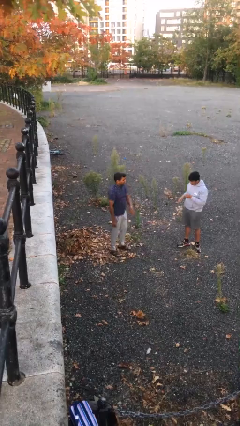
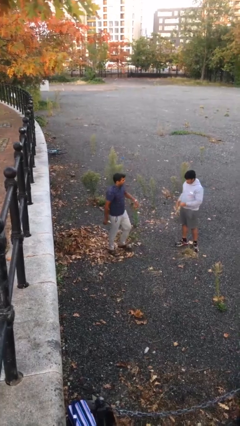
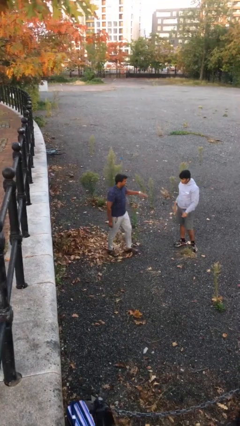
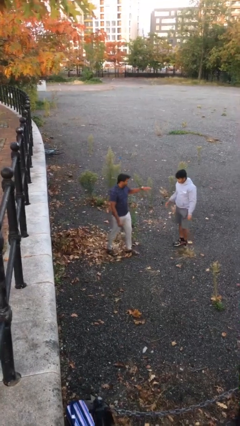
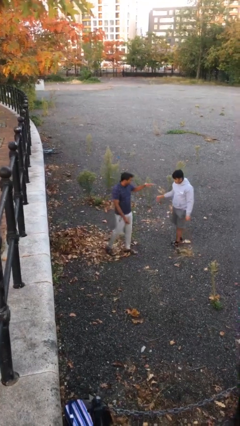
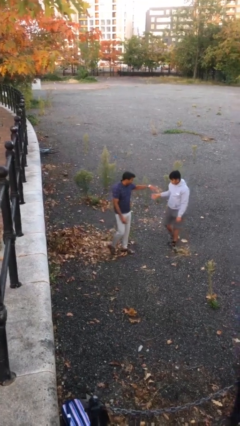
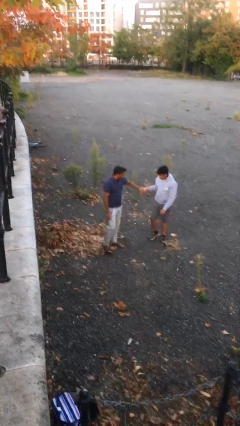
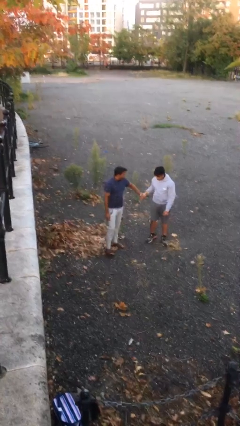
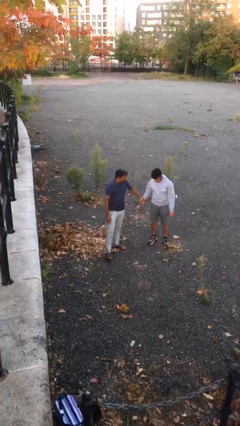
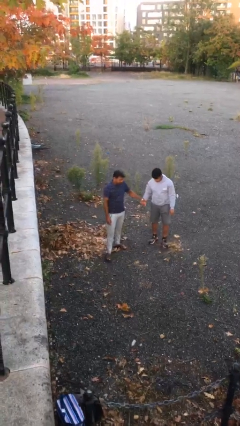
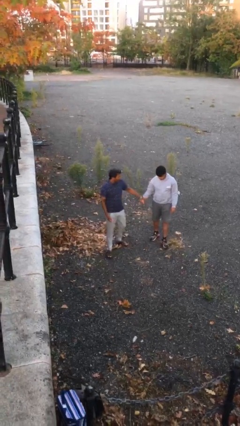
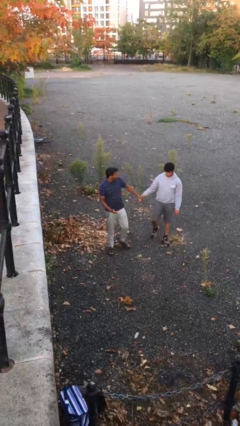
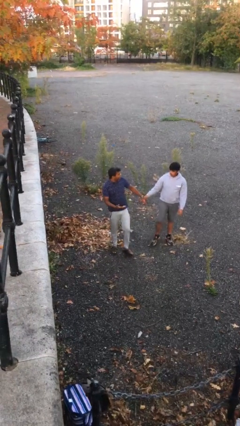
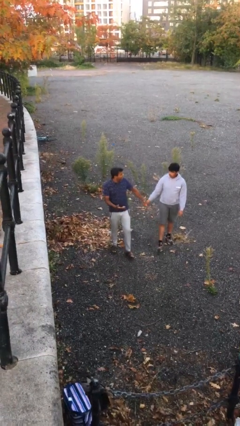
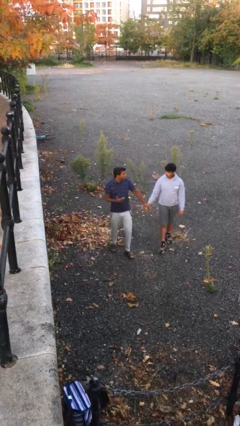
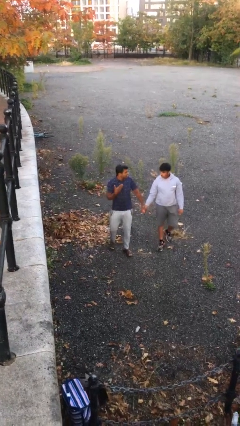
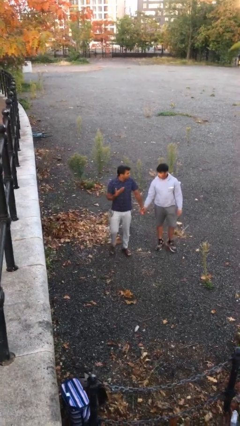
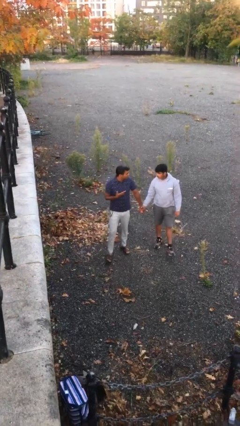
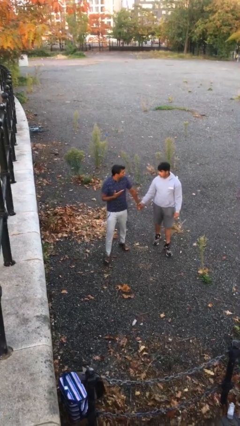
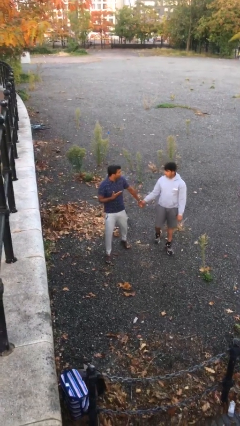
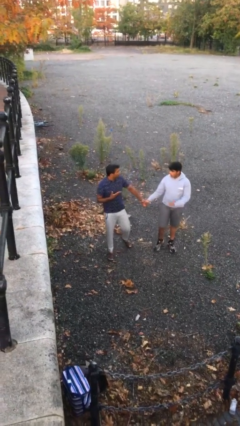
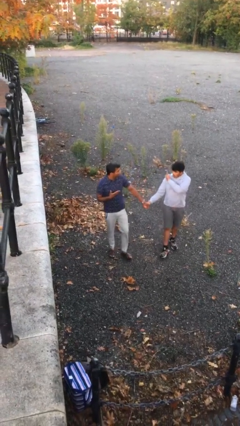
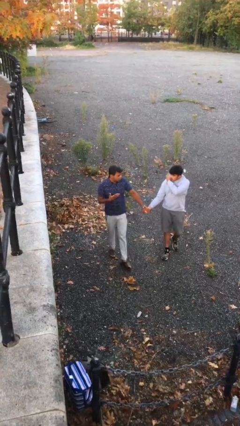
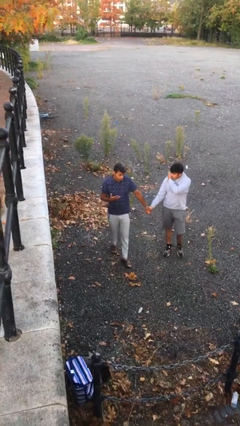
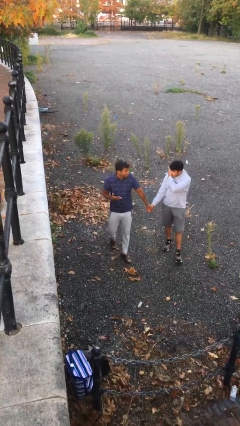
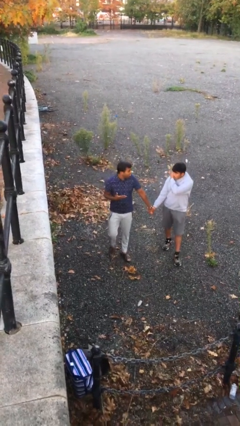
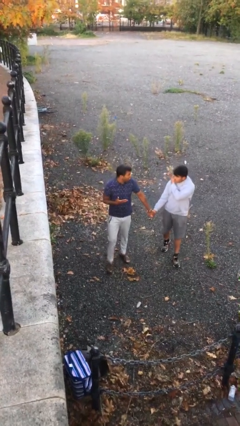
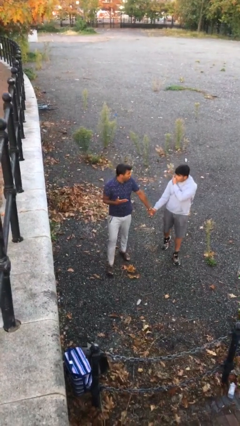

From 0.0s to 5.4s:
person holds hand

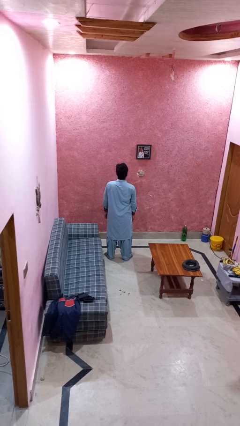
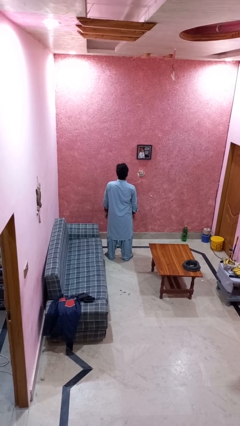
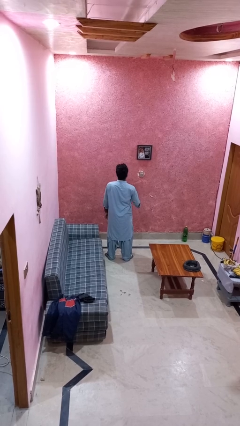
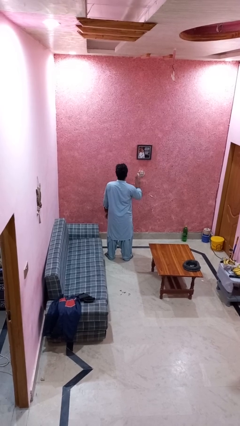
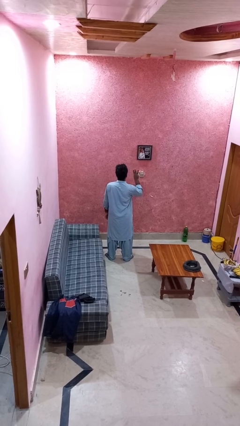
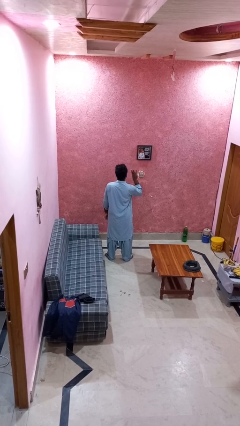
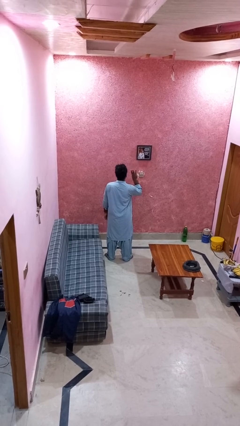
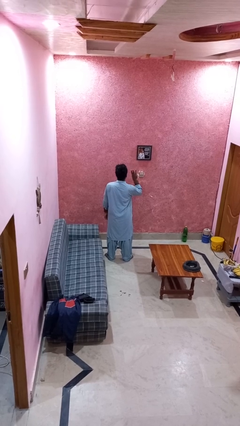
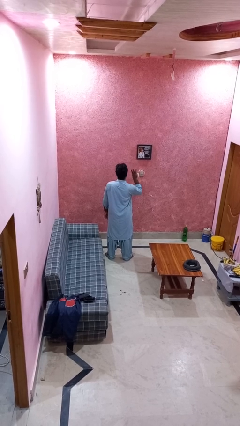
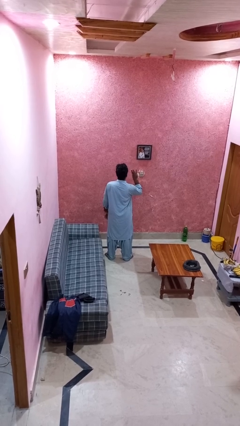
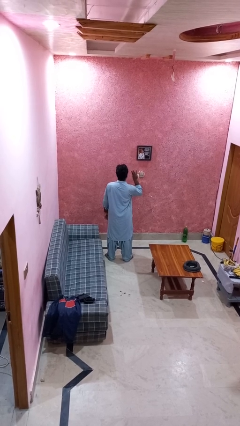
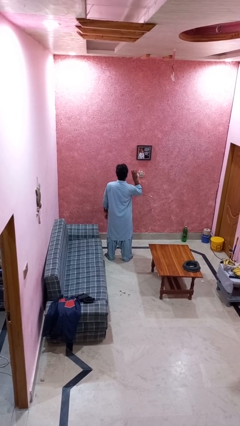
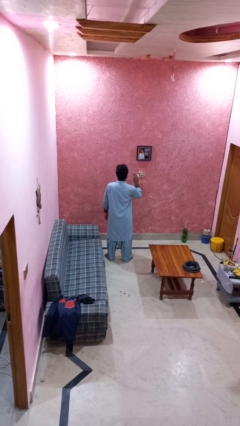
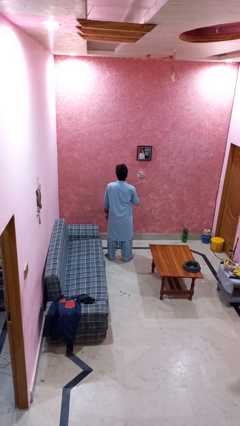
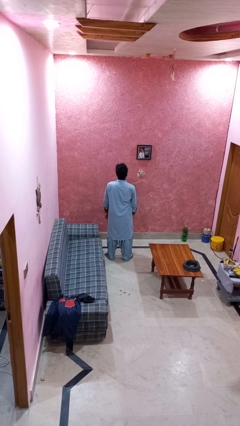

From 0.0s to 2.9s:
person gestures number three

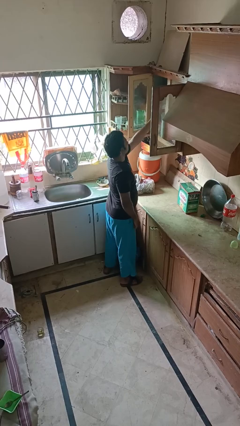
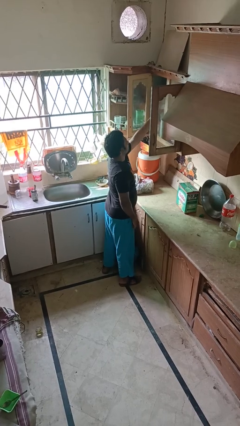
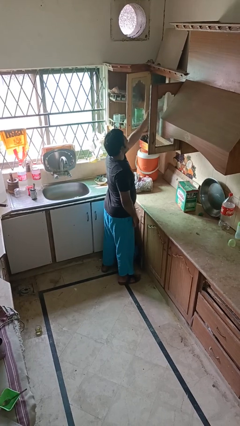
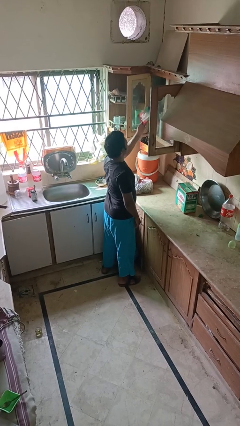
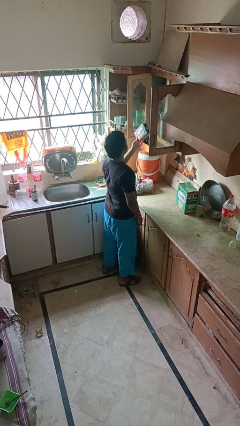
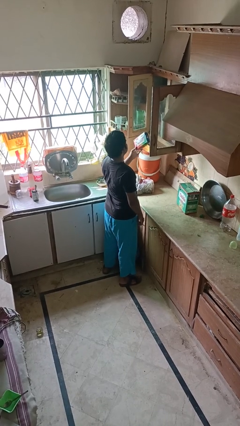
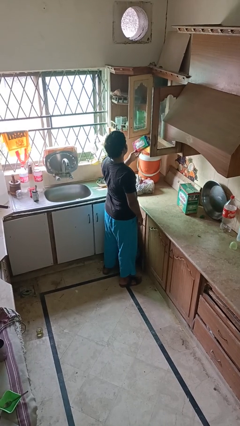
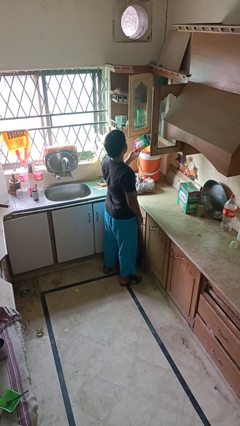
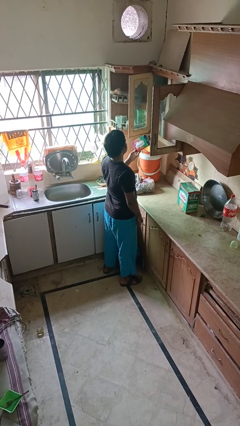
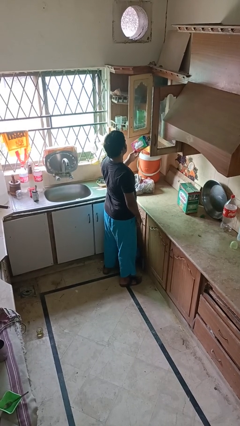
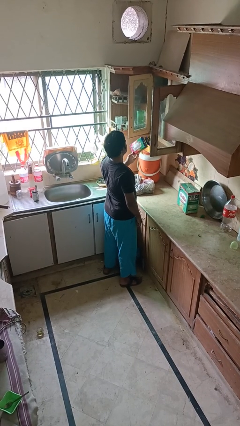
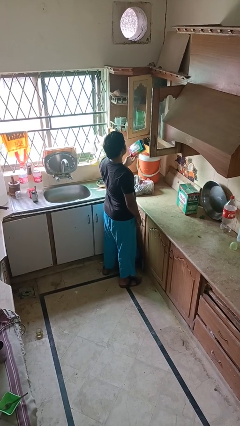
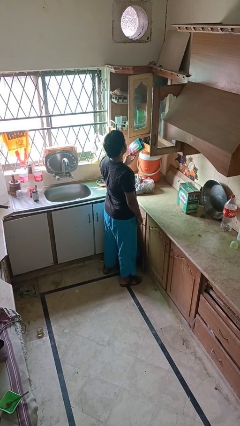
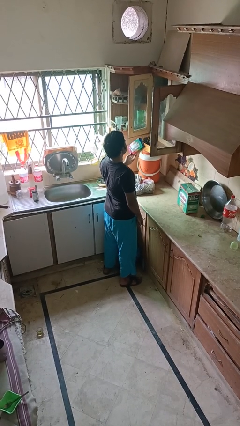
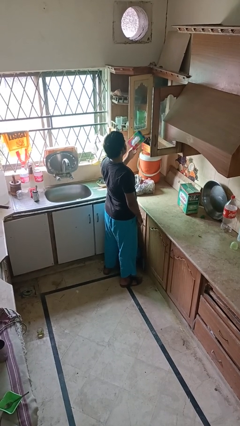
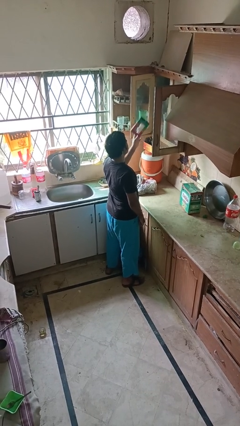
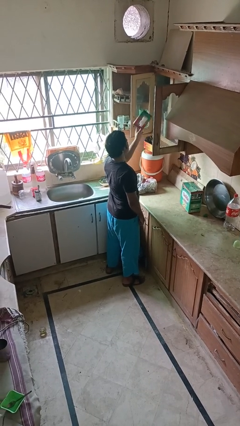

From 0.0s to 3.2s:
person picks up object from cabinet

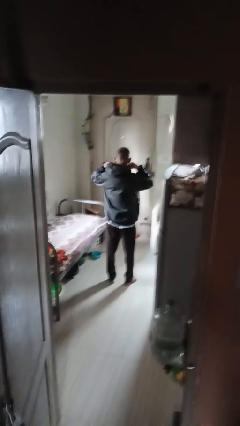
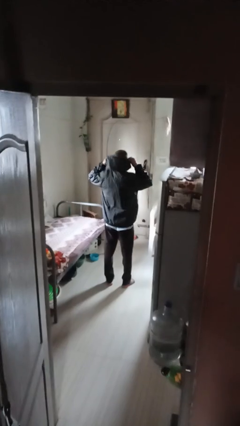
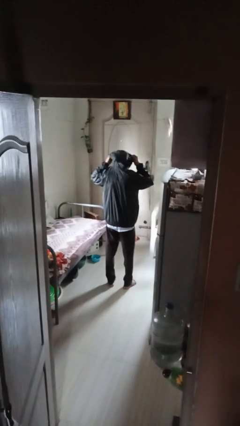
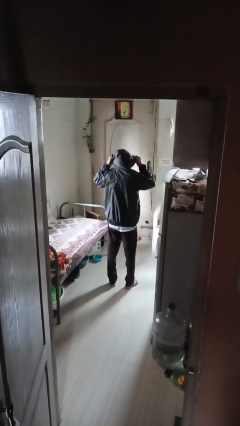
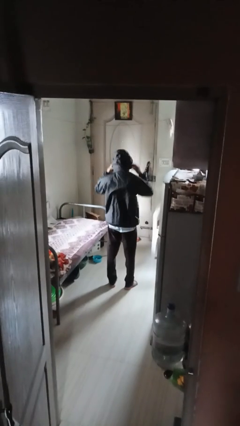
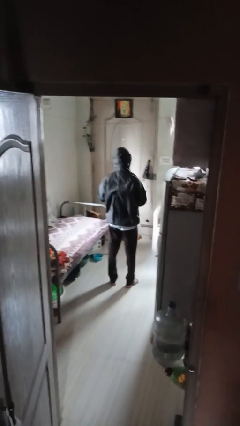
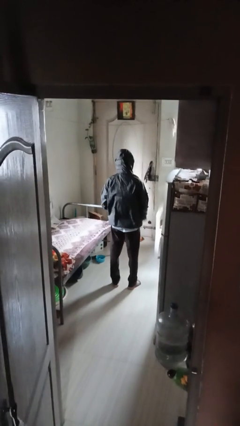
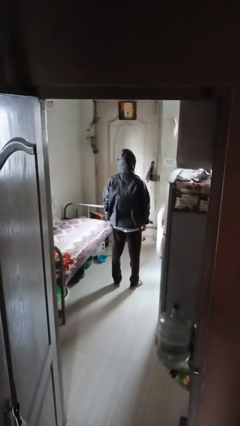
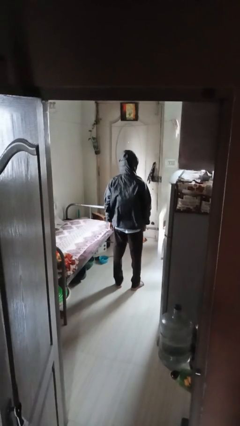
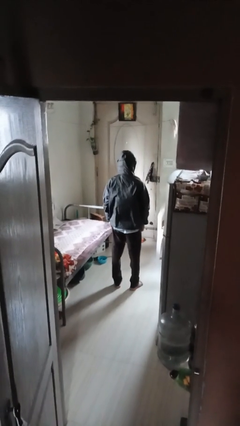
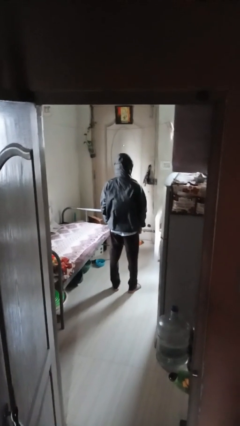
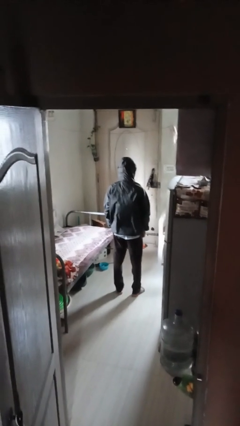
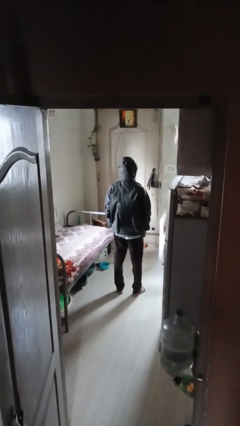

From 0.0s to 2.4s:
person puts on hoodie

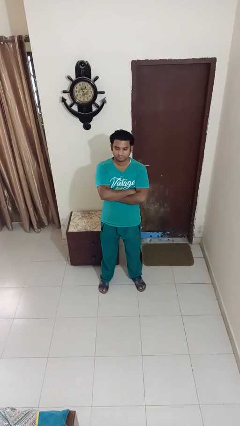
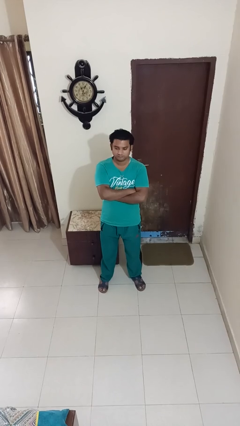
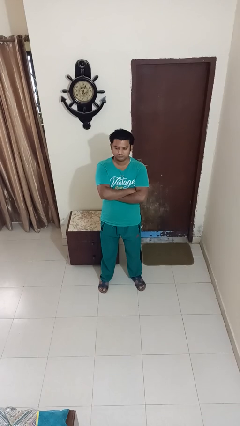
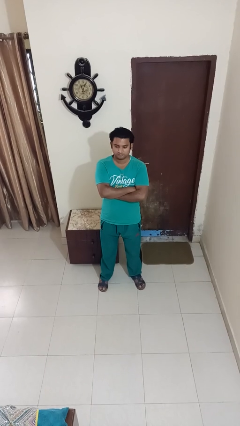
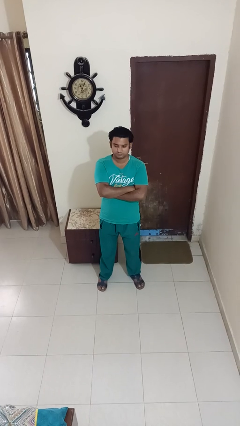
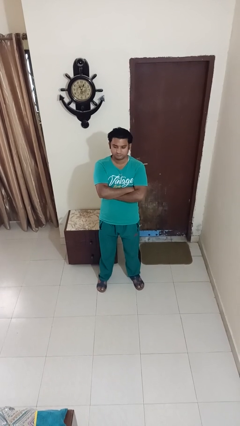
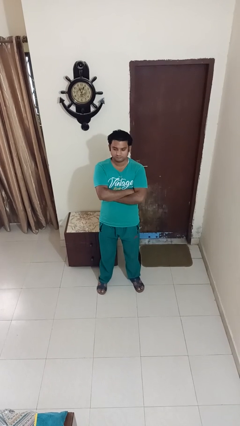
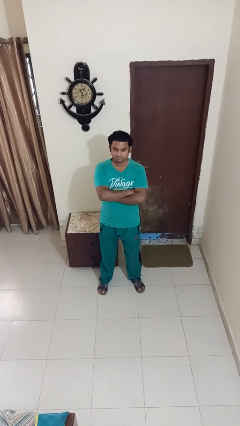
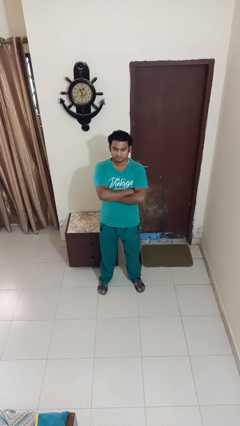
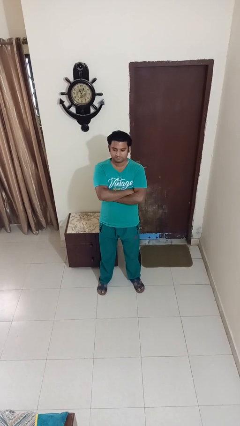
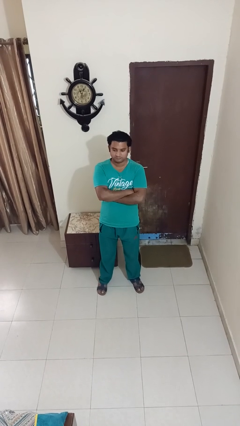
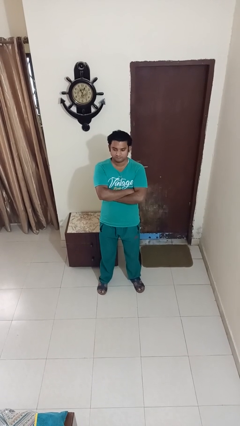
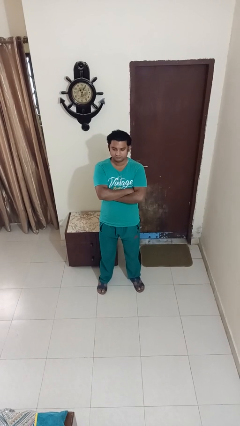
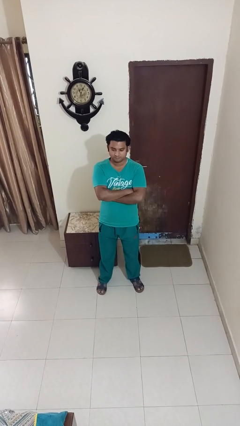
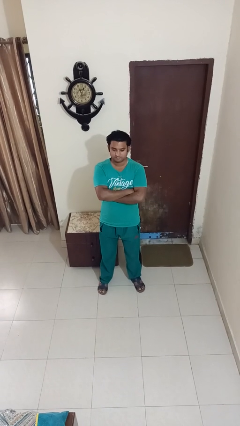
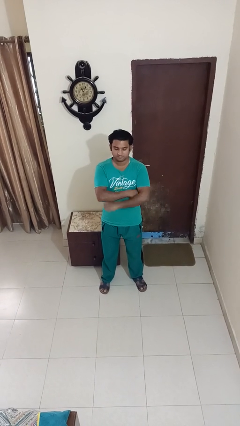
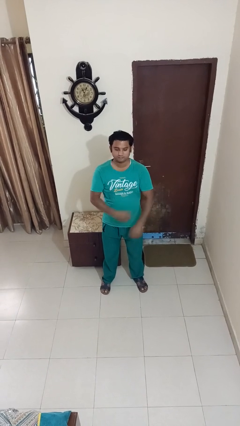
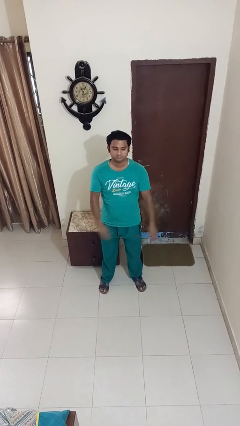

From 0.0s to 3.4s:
person gestures arms x

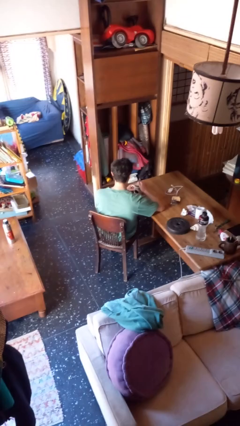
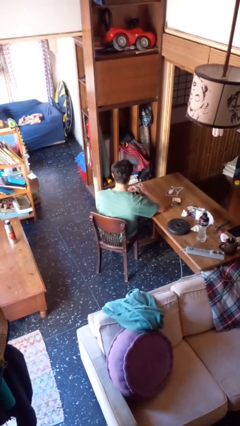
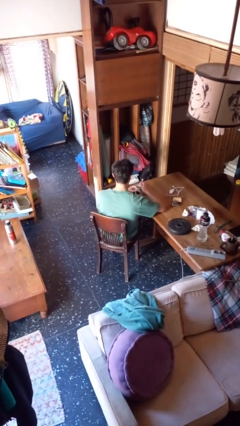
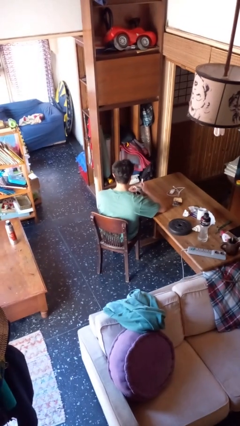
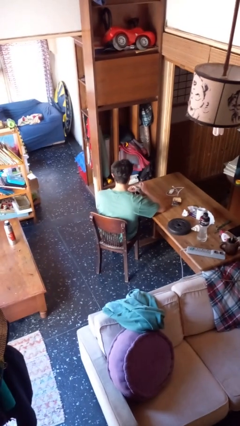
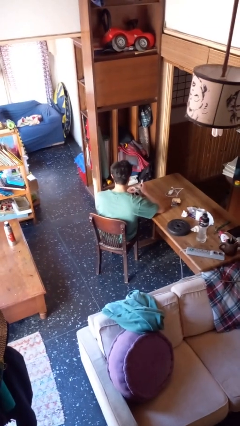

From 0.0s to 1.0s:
person stirs mug
